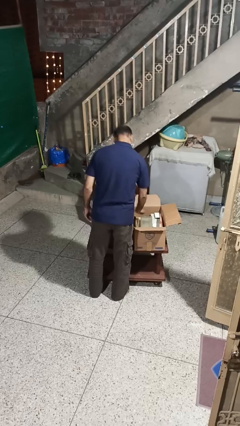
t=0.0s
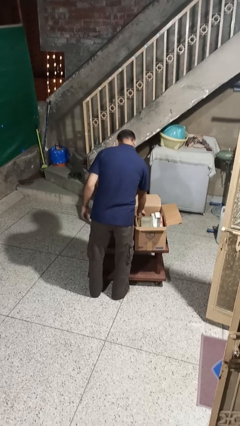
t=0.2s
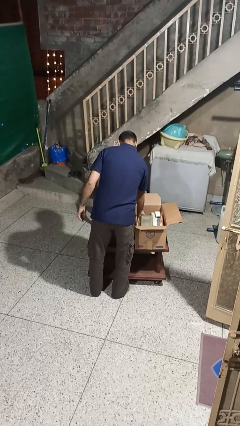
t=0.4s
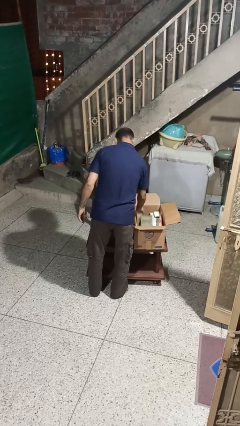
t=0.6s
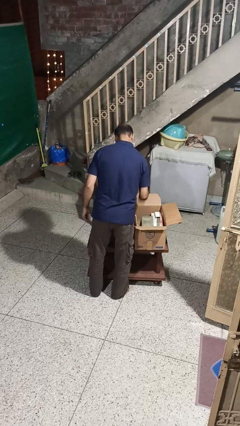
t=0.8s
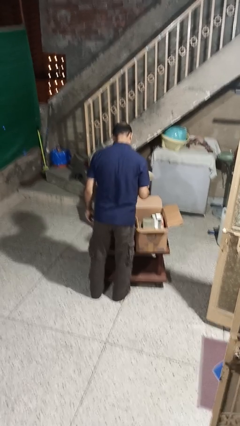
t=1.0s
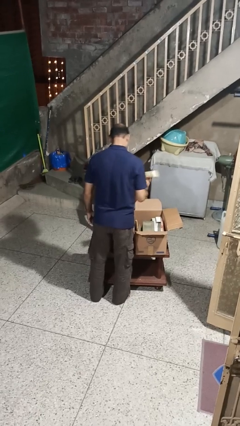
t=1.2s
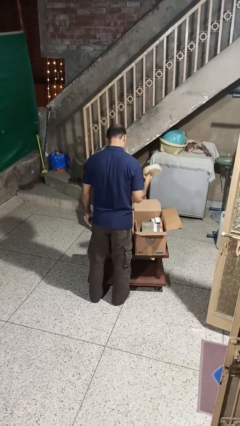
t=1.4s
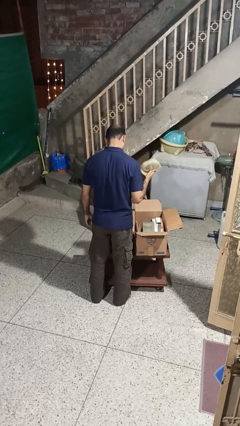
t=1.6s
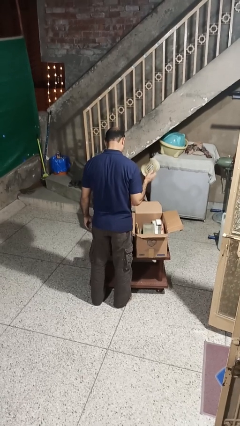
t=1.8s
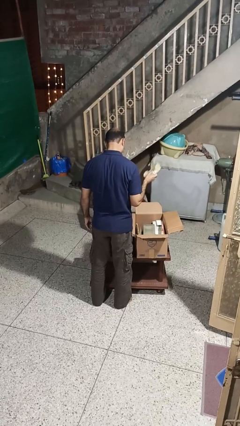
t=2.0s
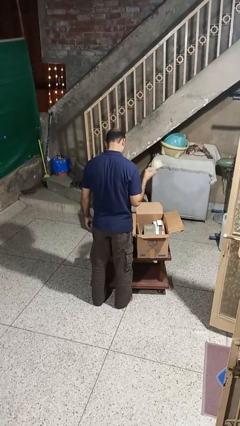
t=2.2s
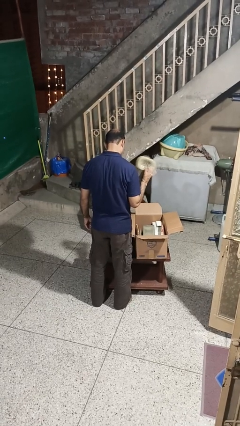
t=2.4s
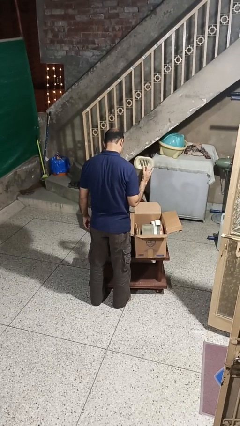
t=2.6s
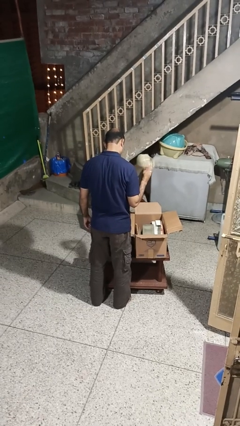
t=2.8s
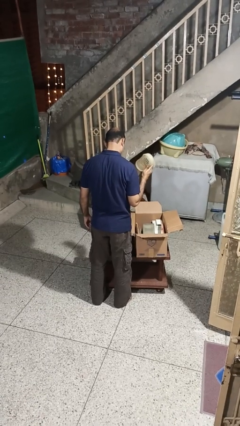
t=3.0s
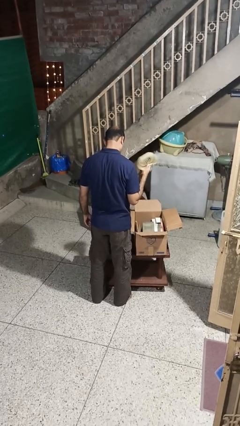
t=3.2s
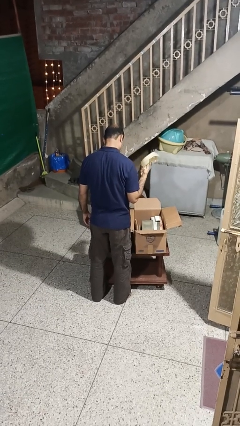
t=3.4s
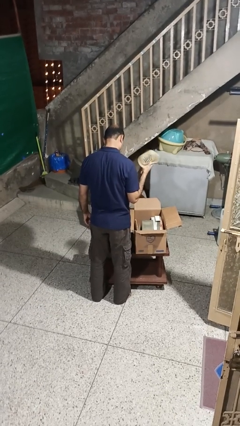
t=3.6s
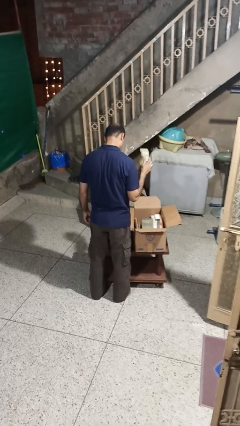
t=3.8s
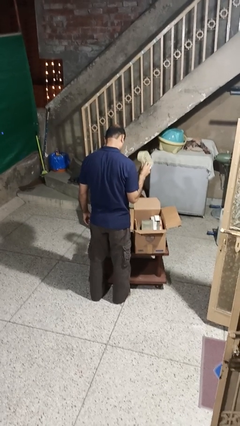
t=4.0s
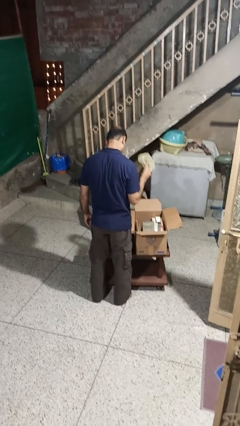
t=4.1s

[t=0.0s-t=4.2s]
person takes object from box

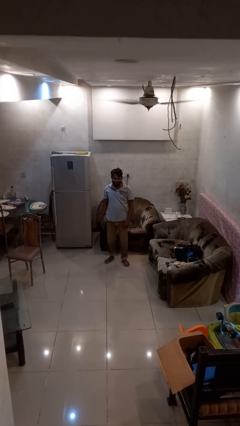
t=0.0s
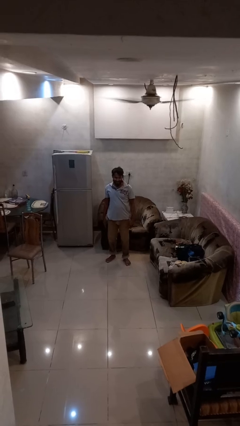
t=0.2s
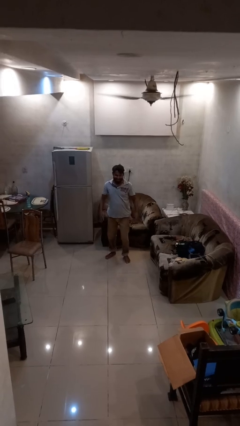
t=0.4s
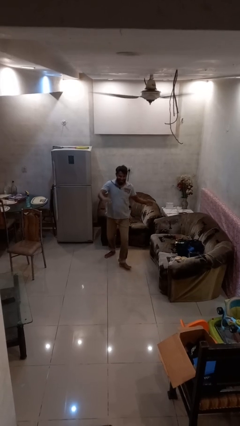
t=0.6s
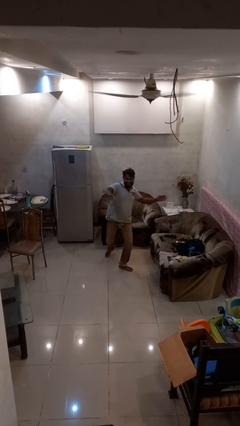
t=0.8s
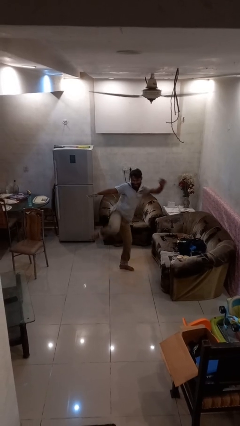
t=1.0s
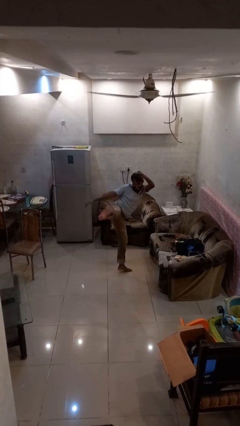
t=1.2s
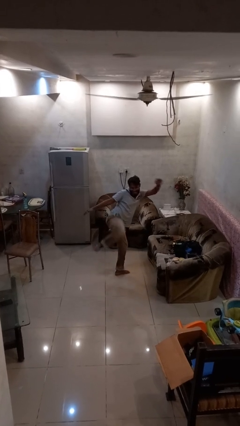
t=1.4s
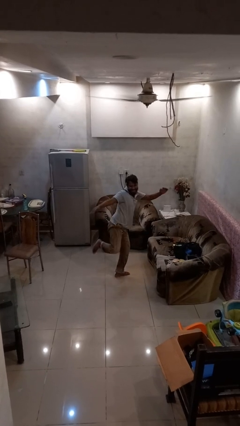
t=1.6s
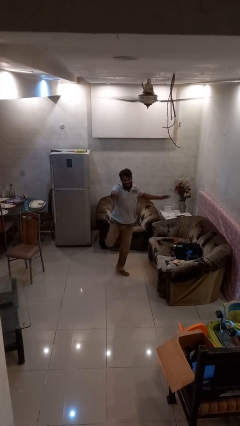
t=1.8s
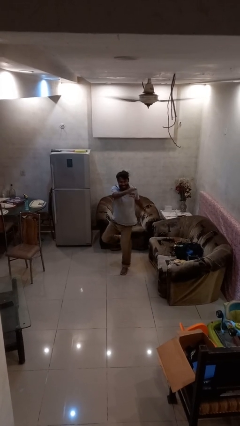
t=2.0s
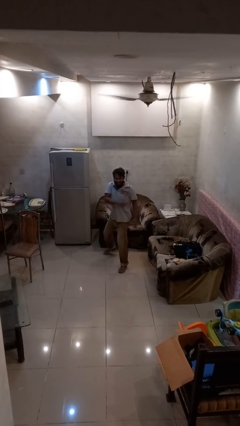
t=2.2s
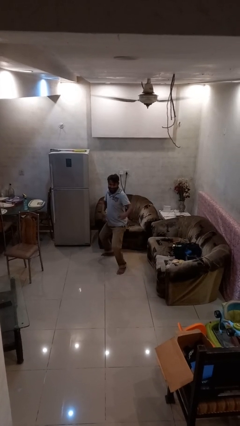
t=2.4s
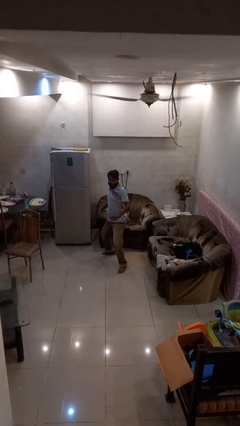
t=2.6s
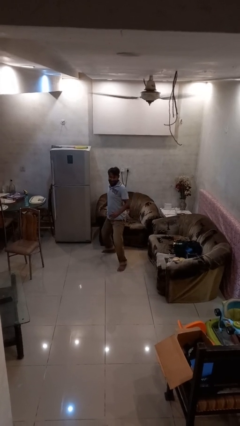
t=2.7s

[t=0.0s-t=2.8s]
person karate kicks

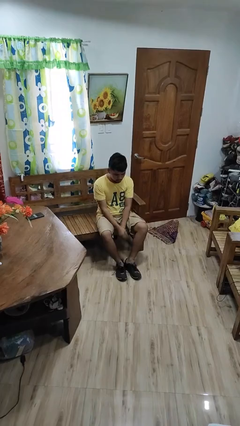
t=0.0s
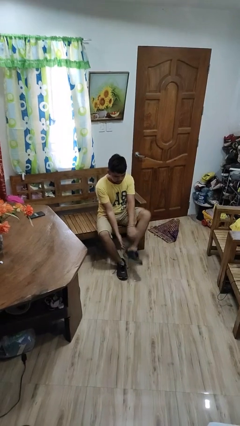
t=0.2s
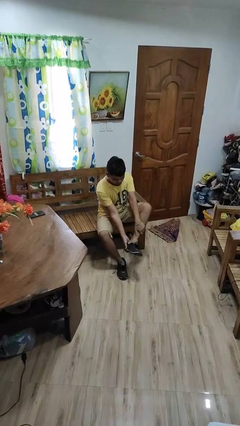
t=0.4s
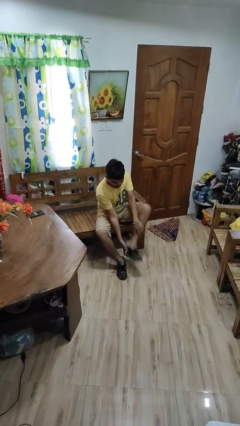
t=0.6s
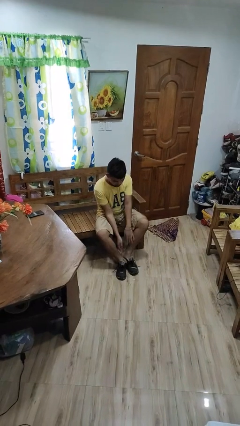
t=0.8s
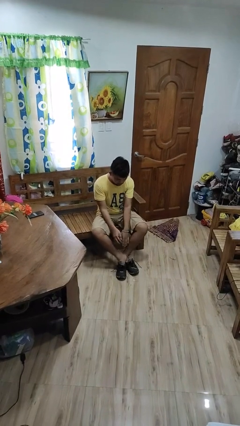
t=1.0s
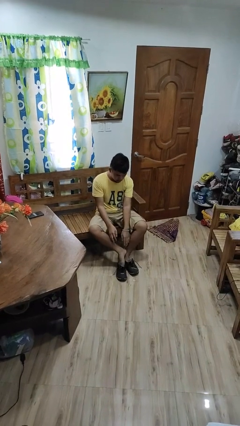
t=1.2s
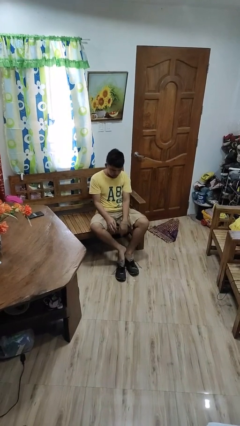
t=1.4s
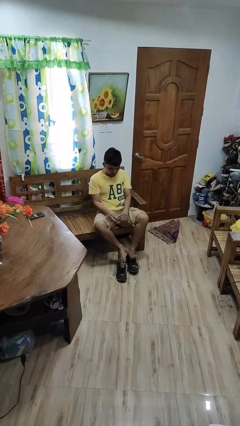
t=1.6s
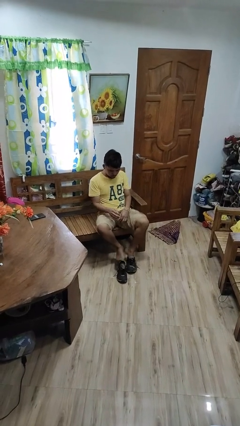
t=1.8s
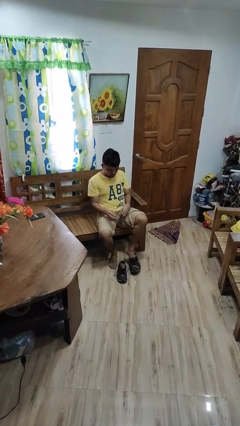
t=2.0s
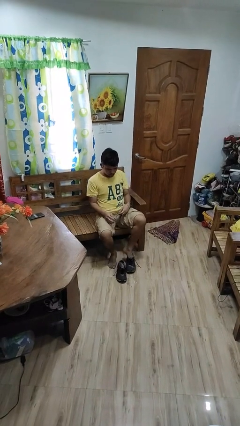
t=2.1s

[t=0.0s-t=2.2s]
person takes off shoes

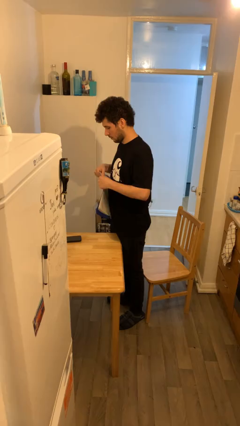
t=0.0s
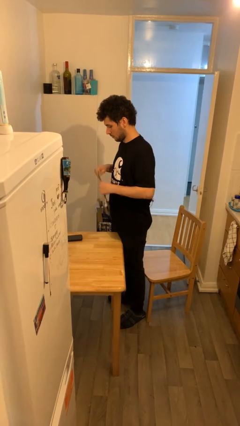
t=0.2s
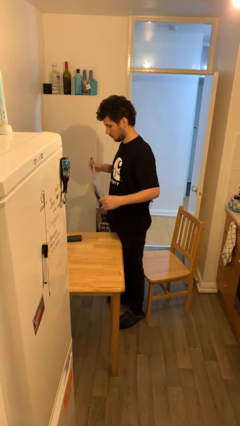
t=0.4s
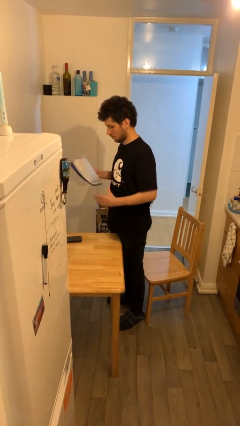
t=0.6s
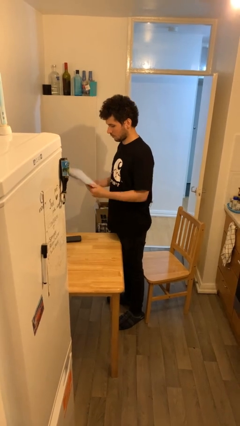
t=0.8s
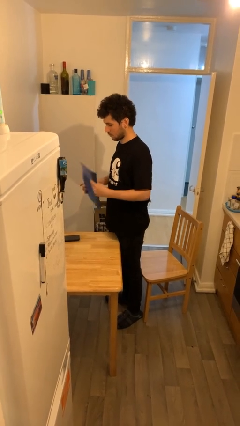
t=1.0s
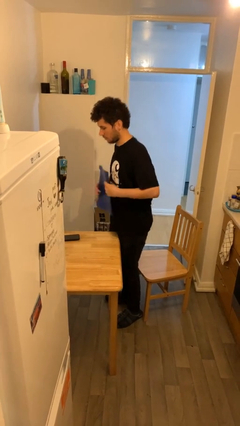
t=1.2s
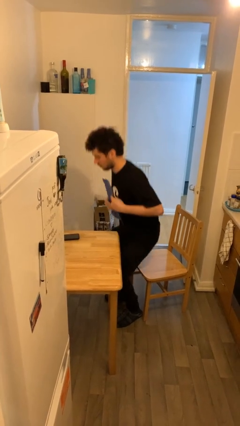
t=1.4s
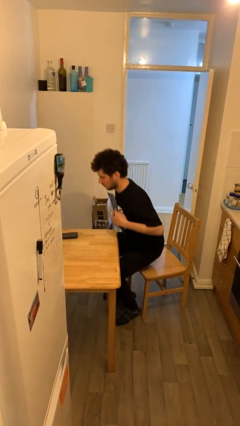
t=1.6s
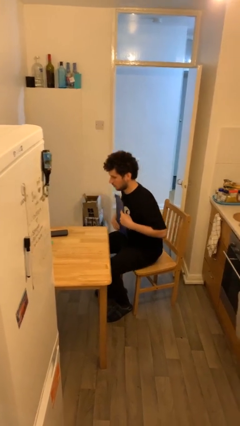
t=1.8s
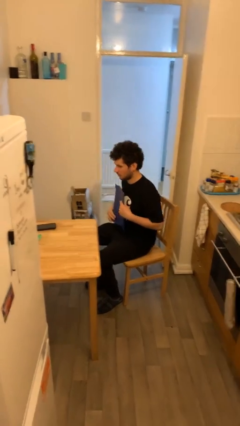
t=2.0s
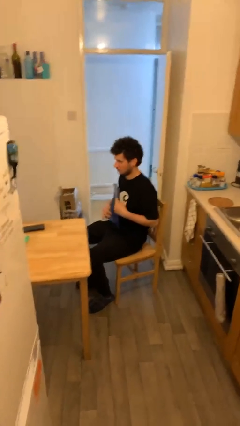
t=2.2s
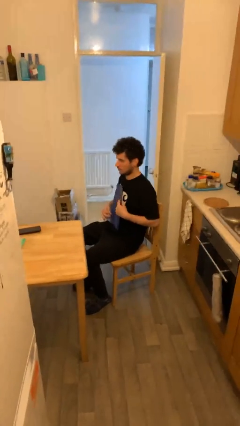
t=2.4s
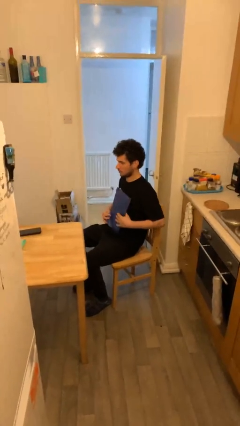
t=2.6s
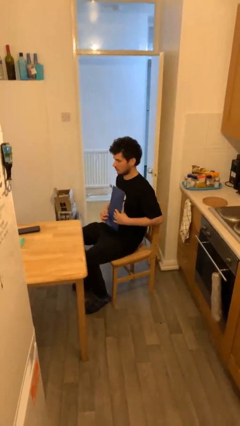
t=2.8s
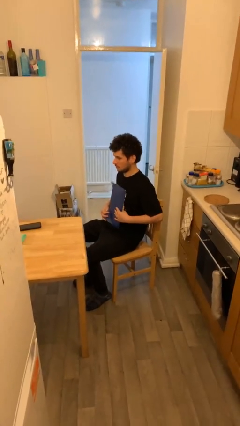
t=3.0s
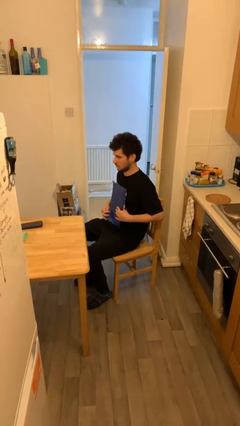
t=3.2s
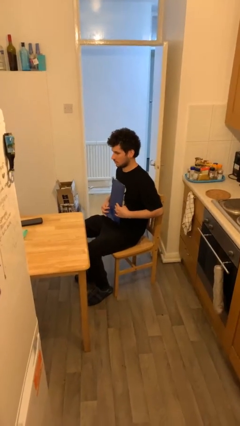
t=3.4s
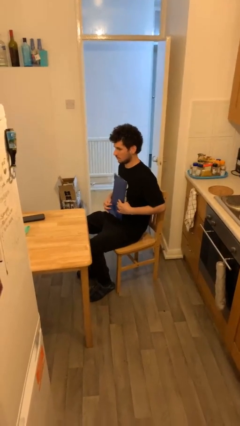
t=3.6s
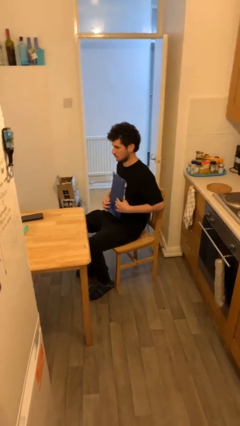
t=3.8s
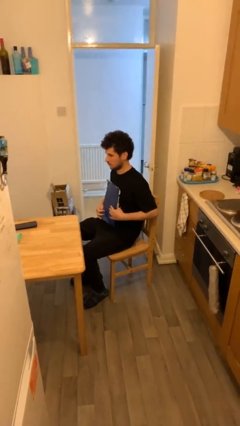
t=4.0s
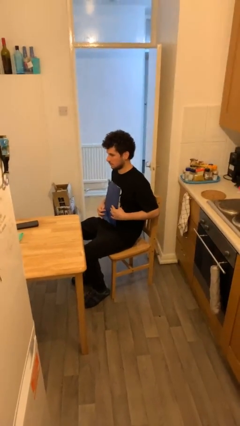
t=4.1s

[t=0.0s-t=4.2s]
person sits down

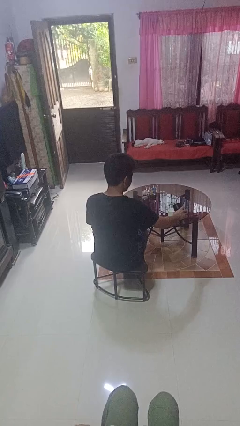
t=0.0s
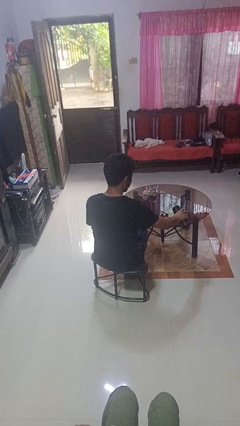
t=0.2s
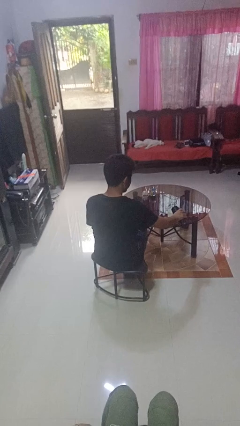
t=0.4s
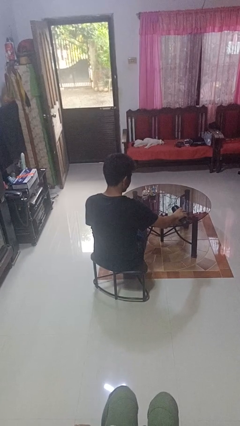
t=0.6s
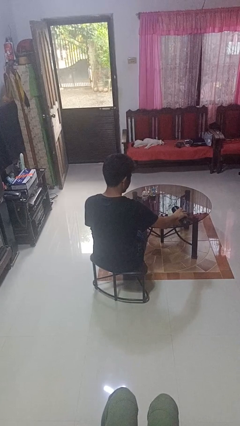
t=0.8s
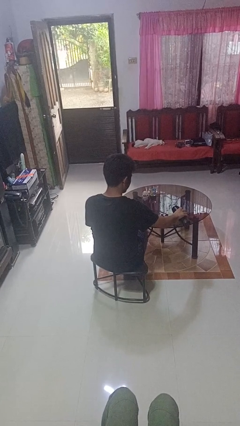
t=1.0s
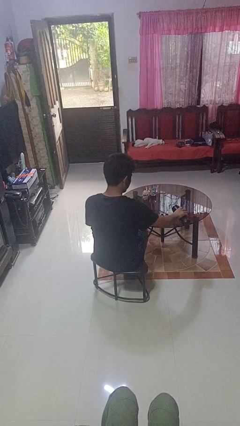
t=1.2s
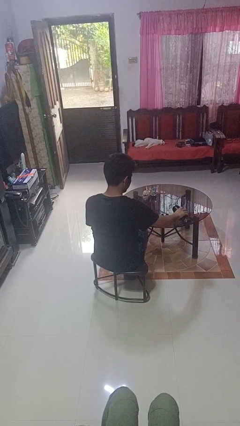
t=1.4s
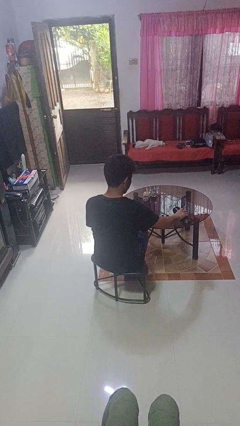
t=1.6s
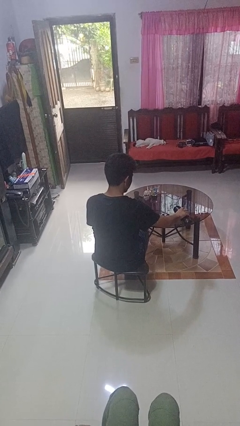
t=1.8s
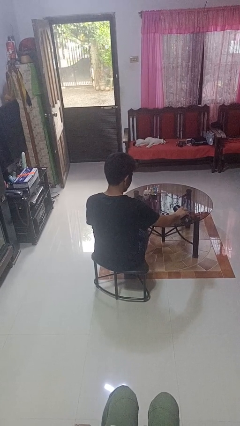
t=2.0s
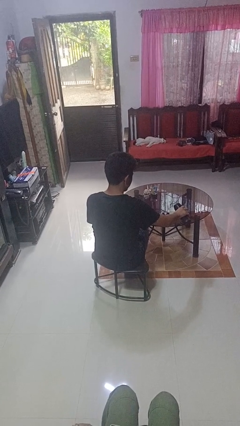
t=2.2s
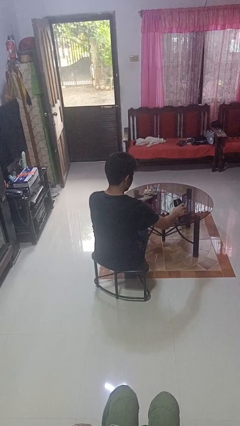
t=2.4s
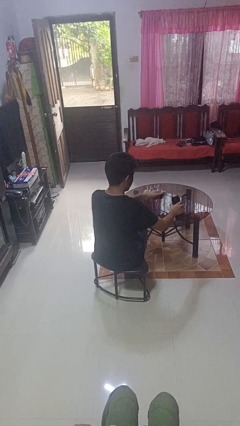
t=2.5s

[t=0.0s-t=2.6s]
person pours liquid into cup

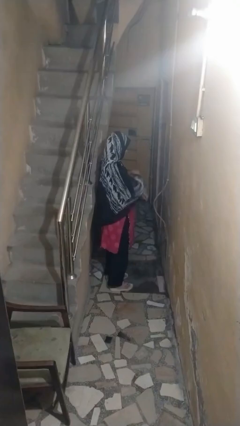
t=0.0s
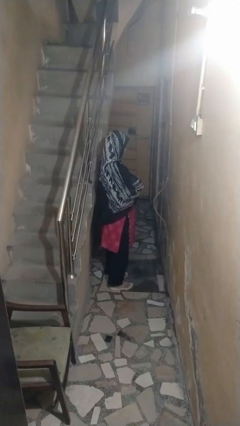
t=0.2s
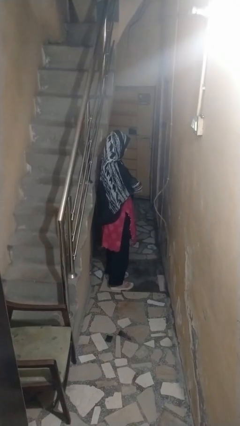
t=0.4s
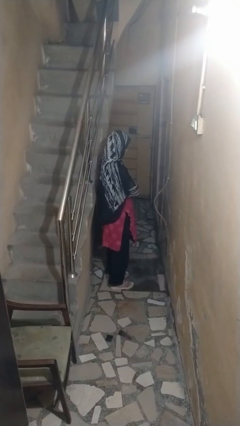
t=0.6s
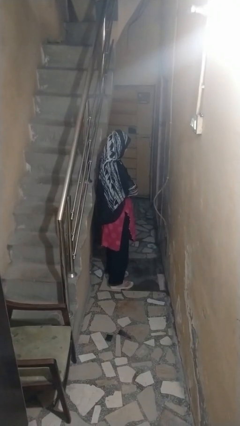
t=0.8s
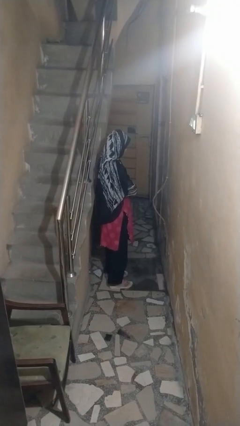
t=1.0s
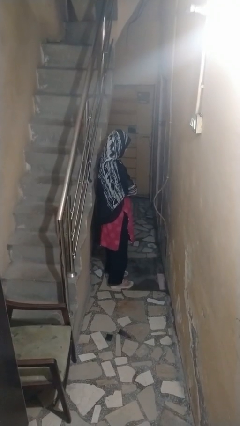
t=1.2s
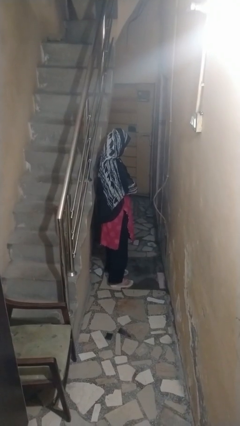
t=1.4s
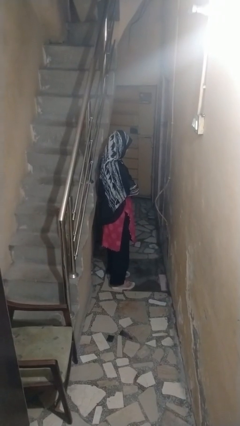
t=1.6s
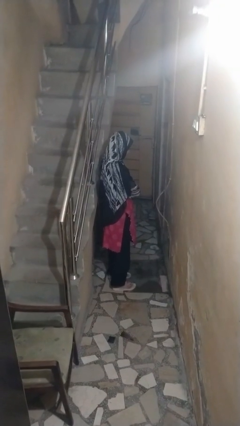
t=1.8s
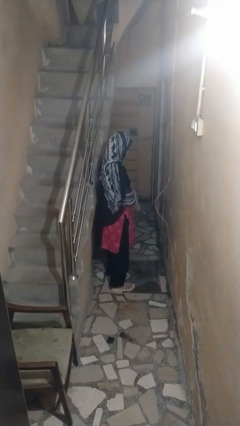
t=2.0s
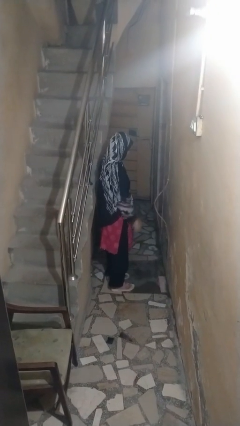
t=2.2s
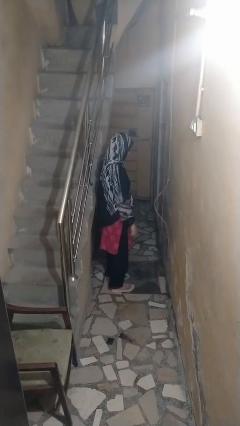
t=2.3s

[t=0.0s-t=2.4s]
person crosses arms
